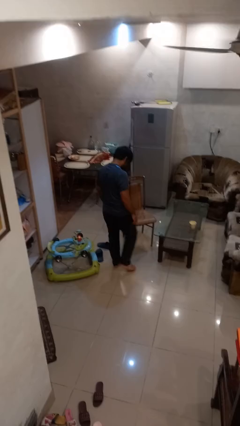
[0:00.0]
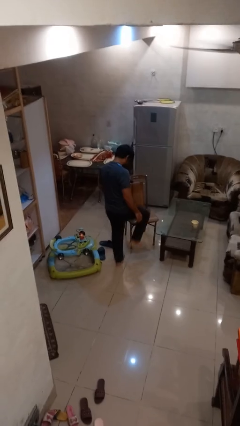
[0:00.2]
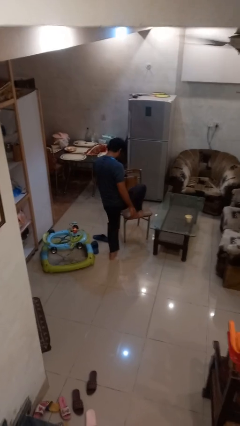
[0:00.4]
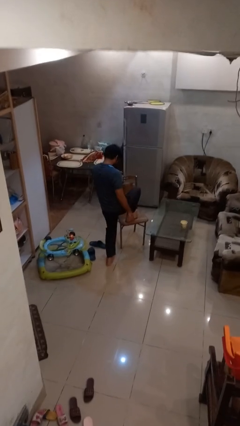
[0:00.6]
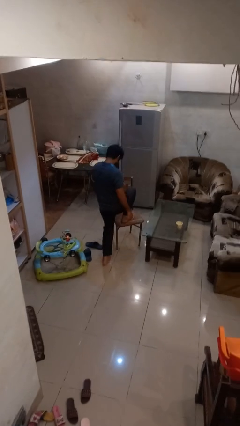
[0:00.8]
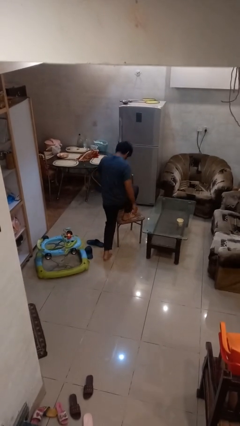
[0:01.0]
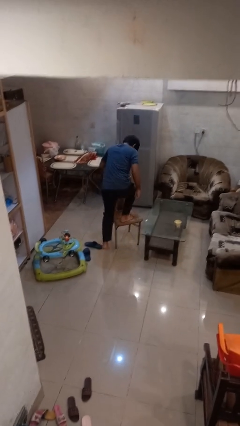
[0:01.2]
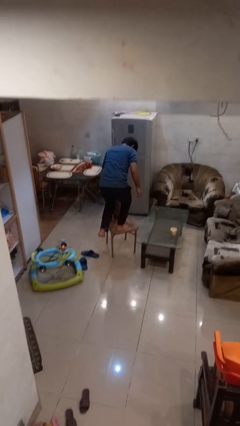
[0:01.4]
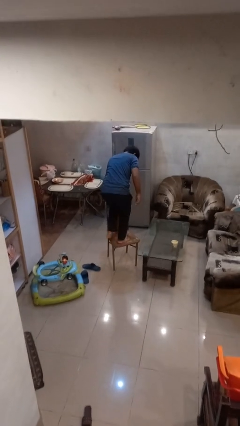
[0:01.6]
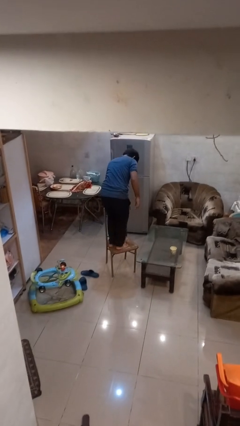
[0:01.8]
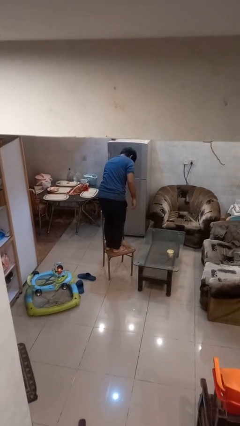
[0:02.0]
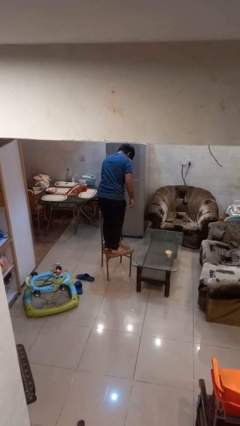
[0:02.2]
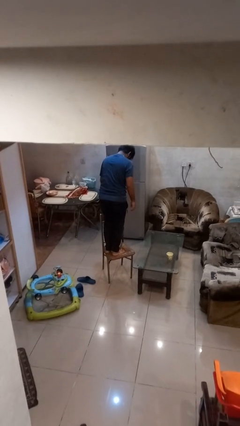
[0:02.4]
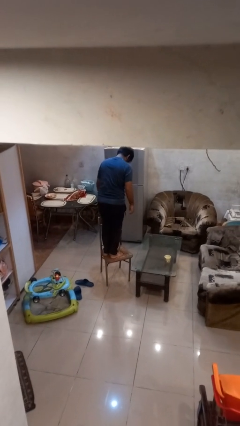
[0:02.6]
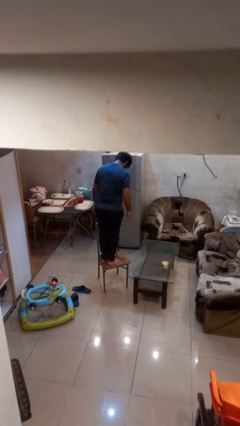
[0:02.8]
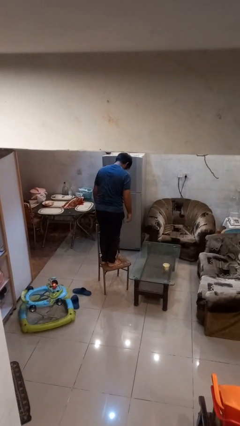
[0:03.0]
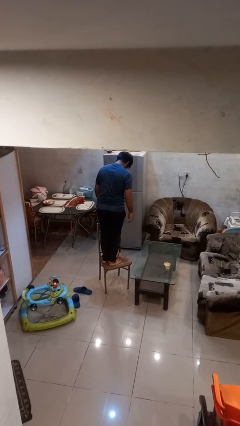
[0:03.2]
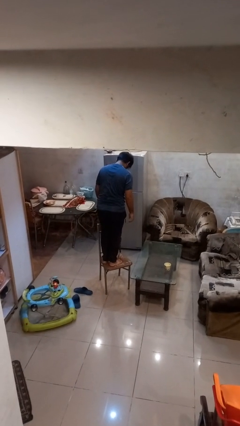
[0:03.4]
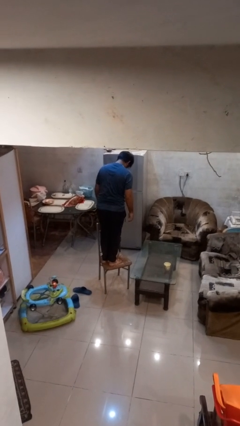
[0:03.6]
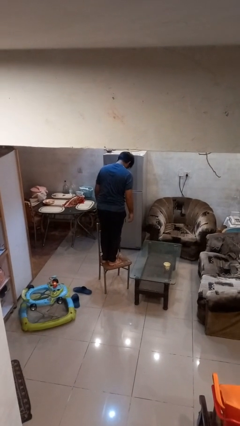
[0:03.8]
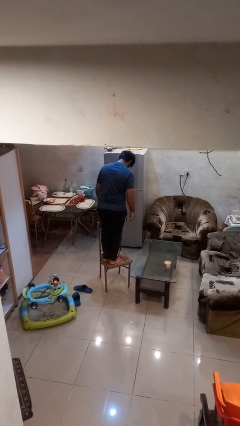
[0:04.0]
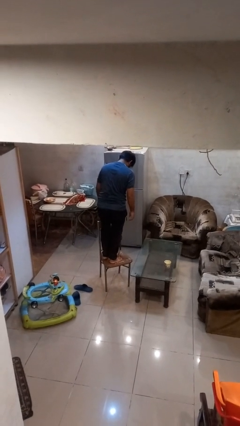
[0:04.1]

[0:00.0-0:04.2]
person climbs on chair

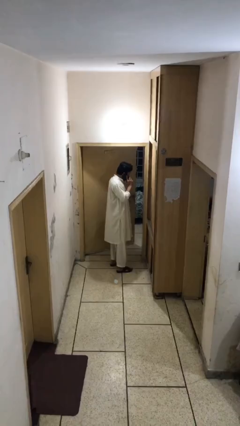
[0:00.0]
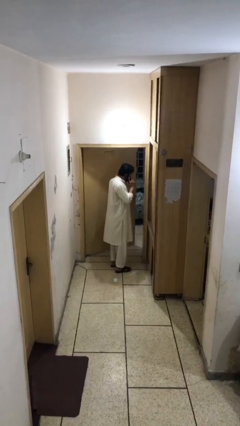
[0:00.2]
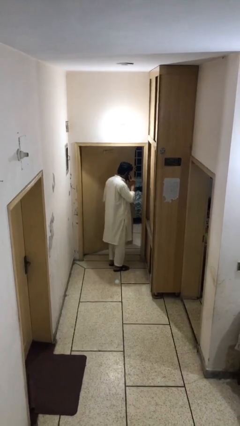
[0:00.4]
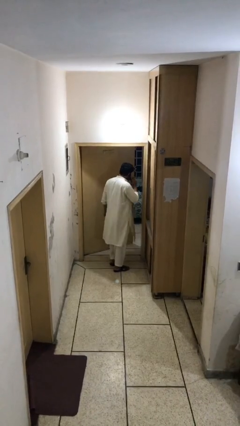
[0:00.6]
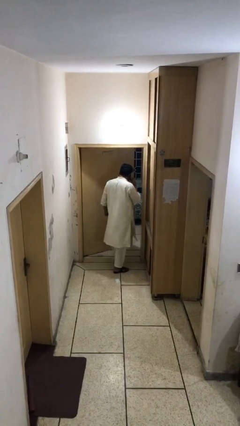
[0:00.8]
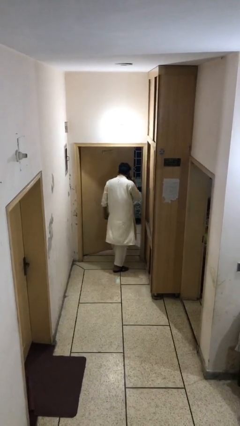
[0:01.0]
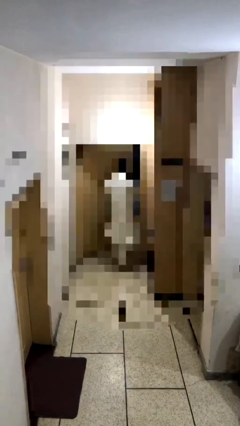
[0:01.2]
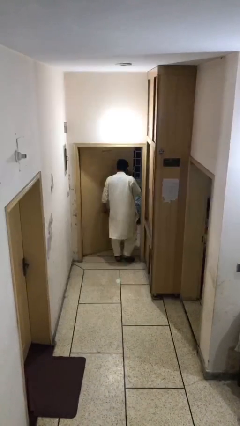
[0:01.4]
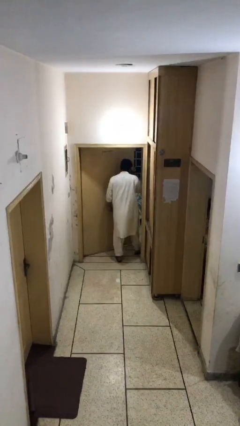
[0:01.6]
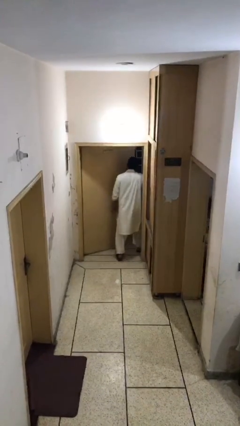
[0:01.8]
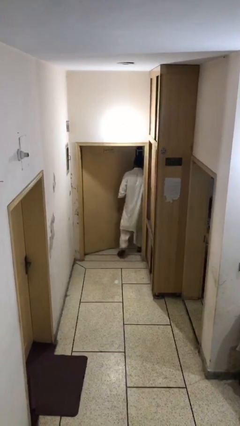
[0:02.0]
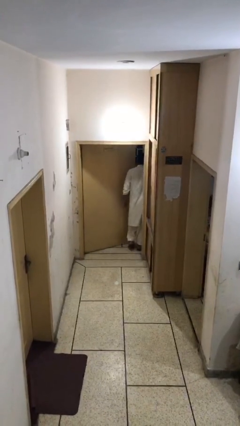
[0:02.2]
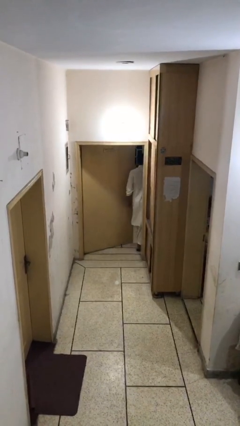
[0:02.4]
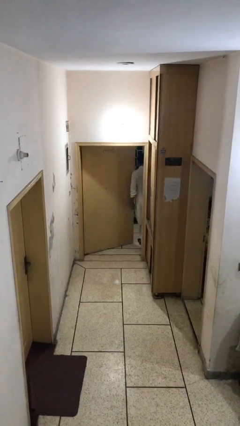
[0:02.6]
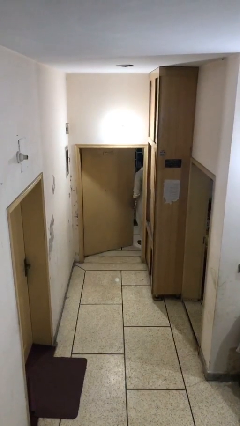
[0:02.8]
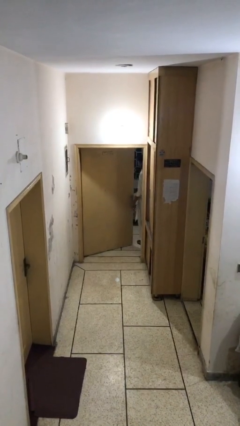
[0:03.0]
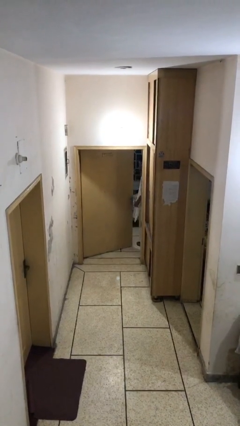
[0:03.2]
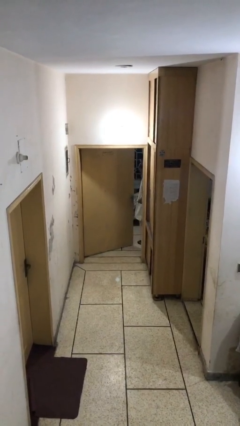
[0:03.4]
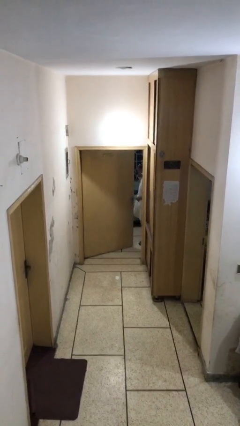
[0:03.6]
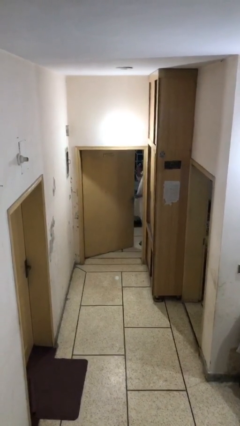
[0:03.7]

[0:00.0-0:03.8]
person exits scene through structure

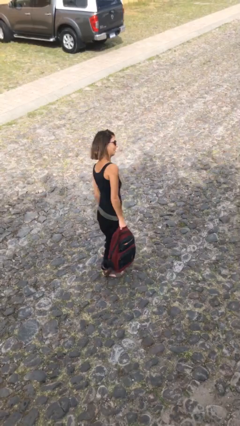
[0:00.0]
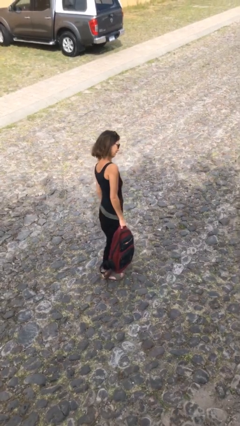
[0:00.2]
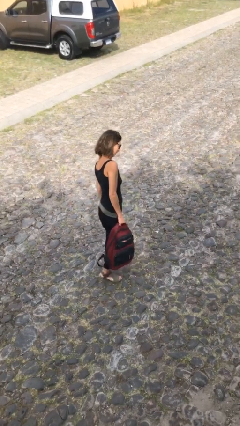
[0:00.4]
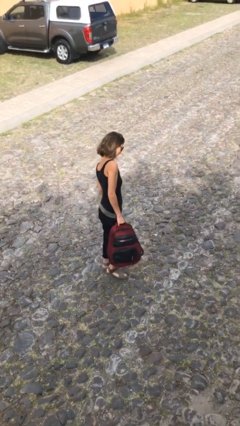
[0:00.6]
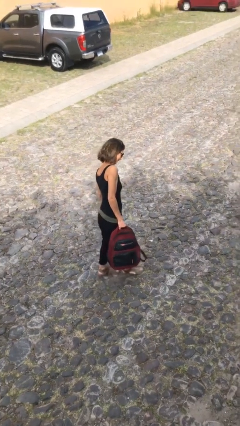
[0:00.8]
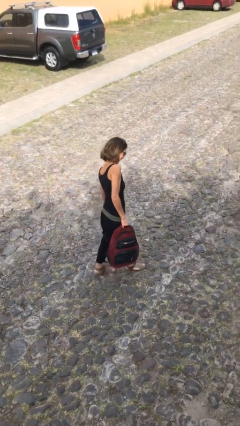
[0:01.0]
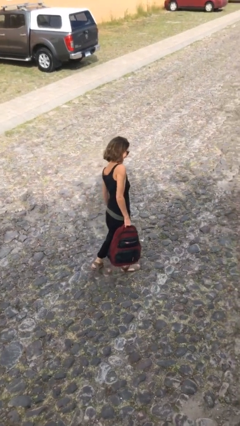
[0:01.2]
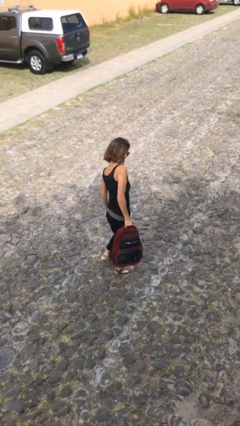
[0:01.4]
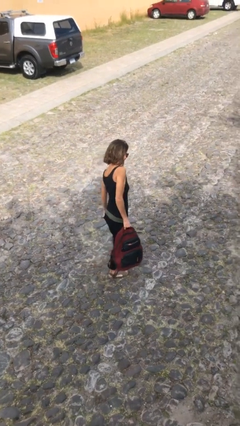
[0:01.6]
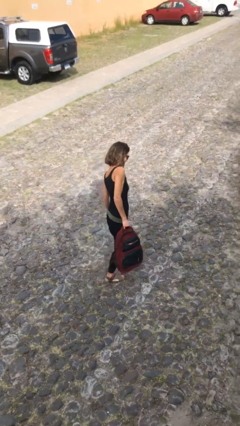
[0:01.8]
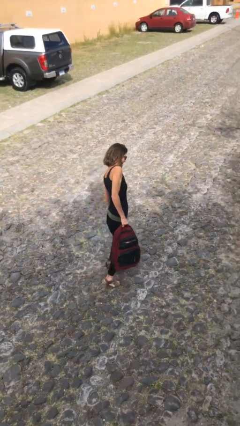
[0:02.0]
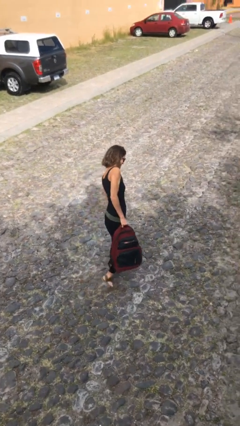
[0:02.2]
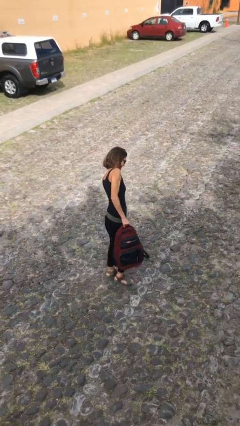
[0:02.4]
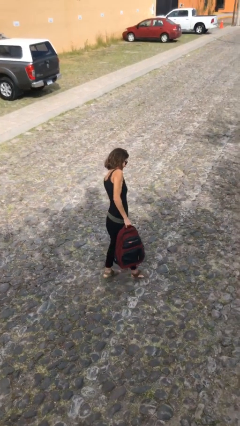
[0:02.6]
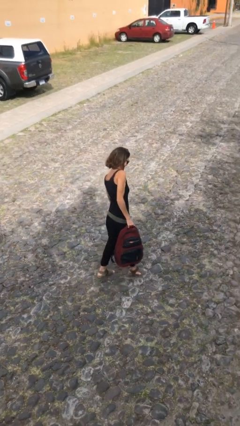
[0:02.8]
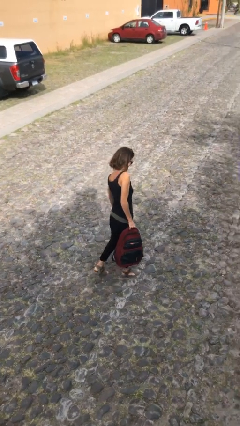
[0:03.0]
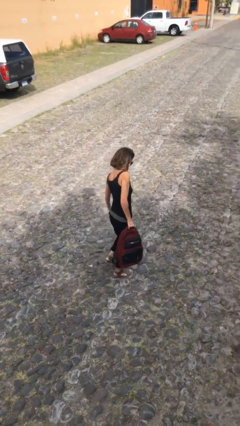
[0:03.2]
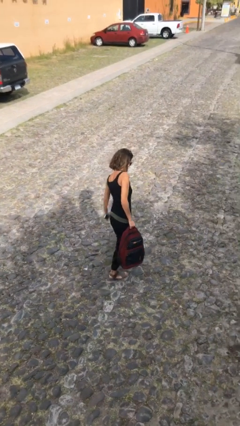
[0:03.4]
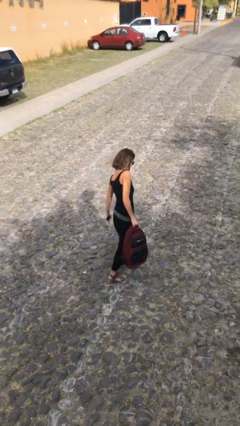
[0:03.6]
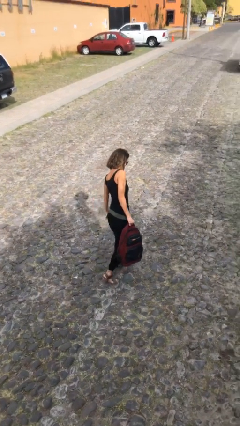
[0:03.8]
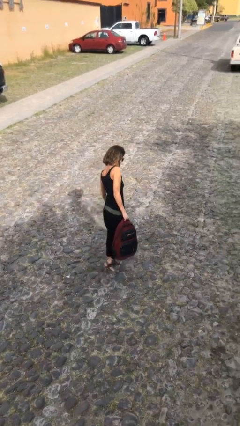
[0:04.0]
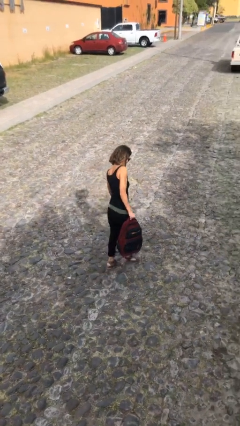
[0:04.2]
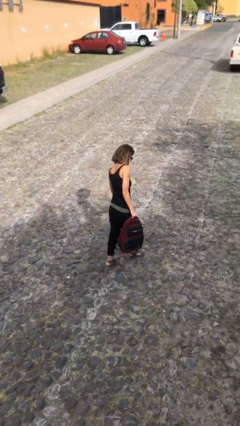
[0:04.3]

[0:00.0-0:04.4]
person carries heavy object

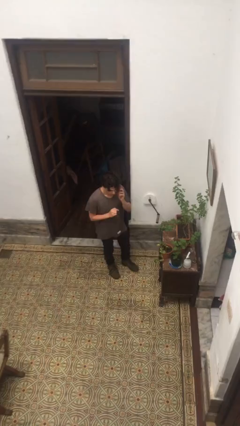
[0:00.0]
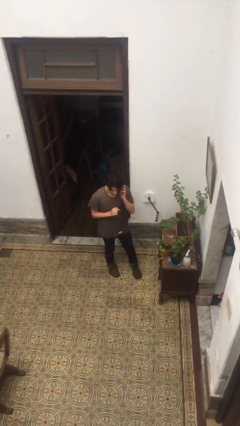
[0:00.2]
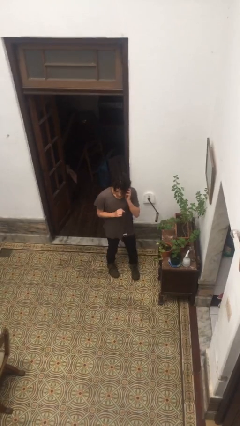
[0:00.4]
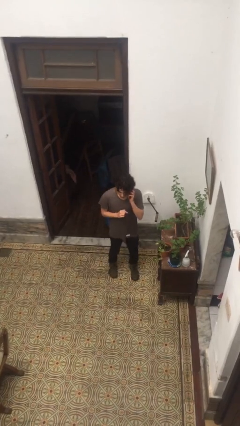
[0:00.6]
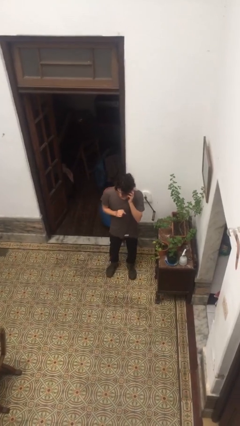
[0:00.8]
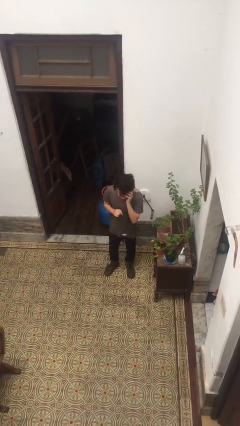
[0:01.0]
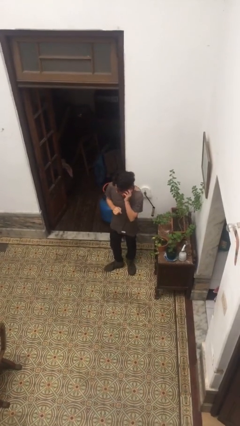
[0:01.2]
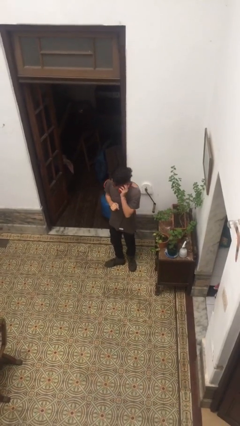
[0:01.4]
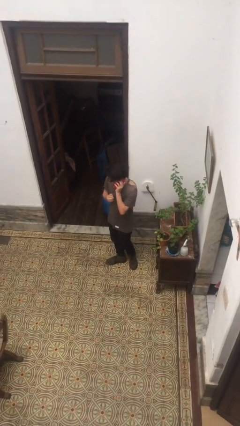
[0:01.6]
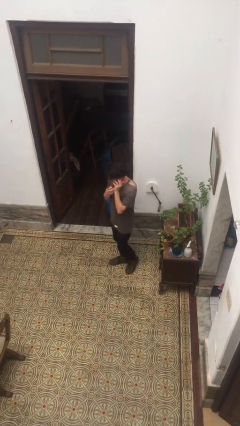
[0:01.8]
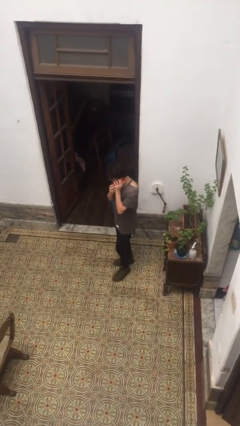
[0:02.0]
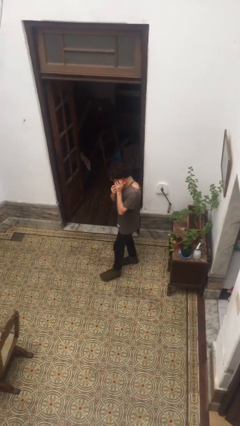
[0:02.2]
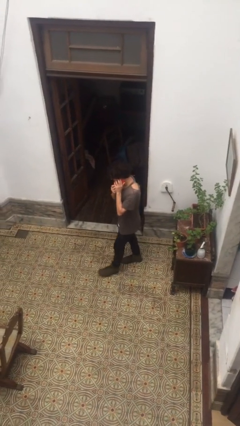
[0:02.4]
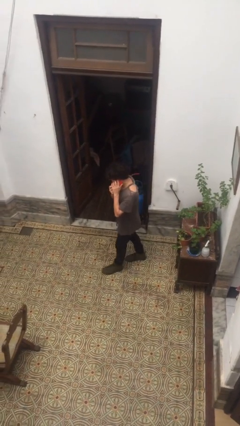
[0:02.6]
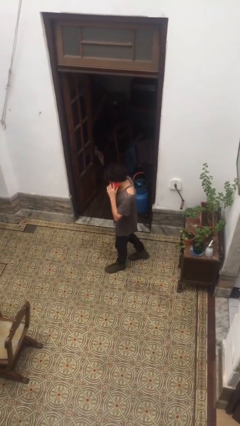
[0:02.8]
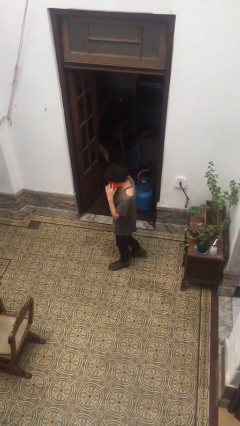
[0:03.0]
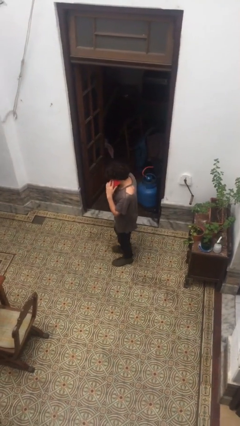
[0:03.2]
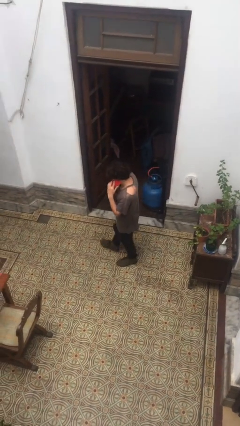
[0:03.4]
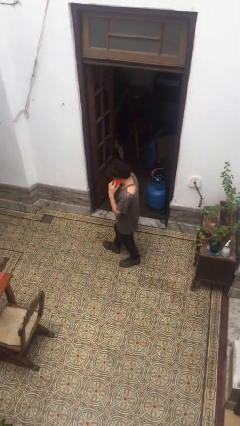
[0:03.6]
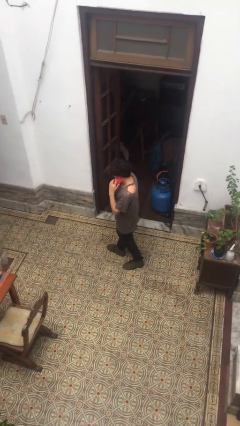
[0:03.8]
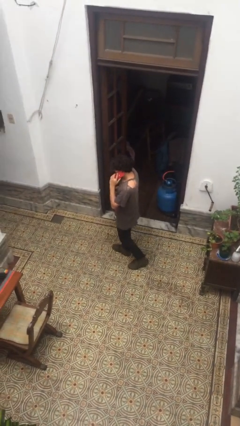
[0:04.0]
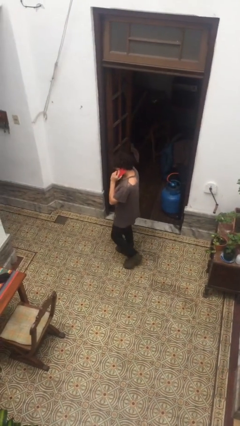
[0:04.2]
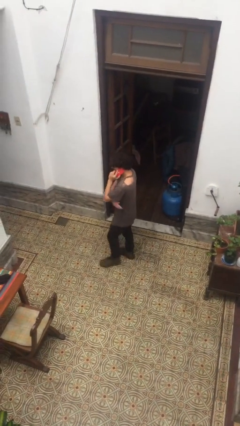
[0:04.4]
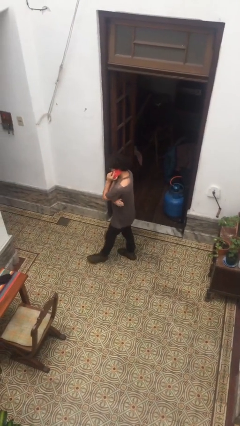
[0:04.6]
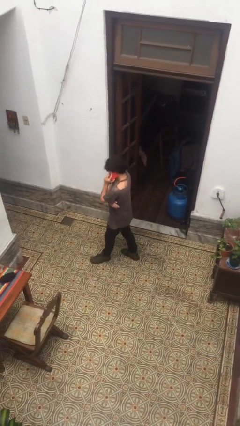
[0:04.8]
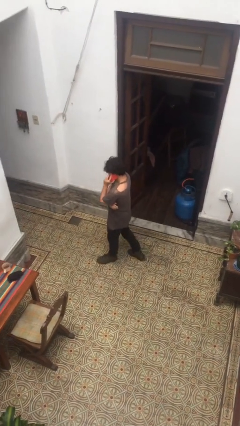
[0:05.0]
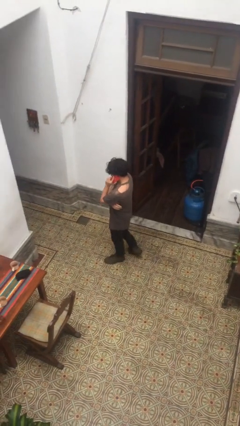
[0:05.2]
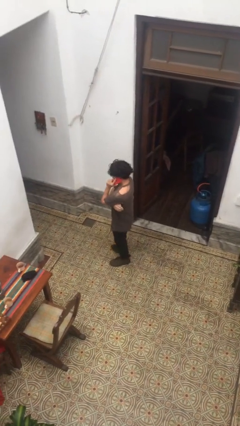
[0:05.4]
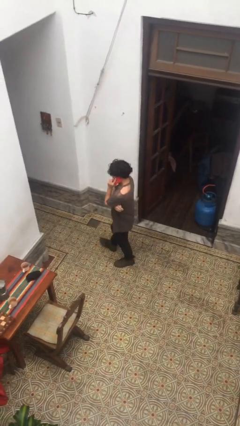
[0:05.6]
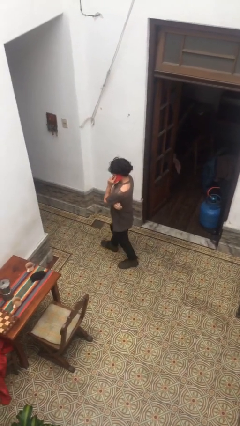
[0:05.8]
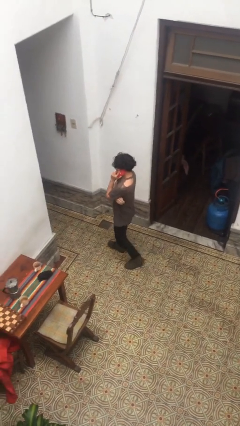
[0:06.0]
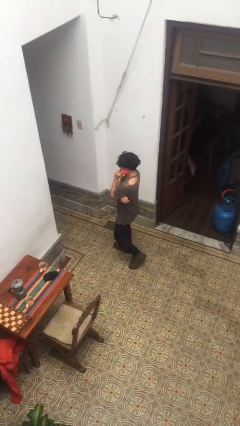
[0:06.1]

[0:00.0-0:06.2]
person talks on phone
